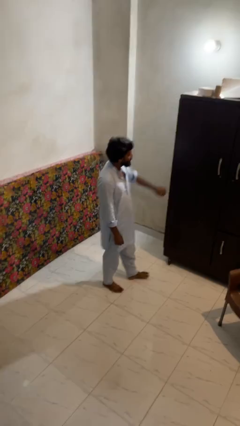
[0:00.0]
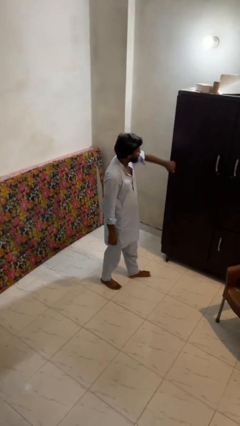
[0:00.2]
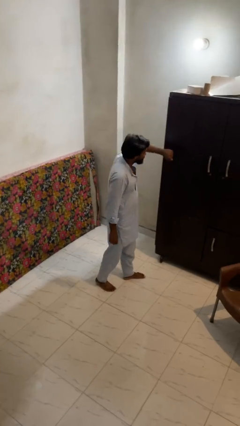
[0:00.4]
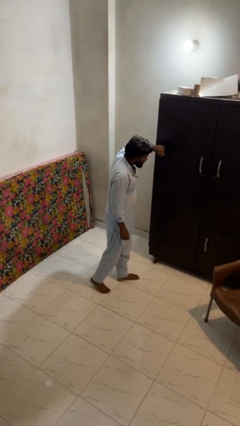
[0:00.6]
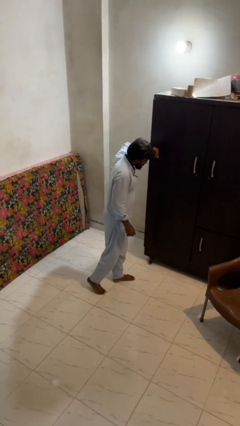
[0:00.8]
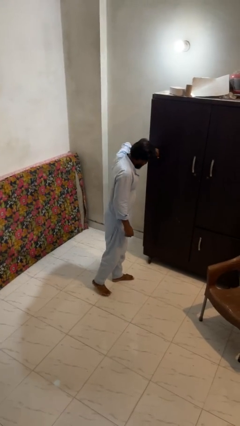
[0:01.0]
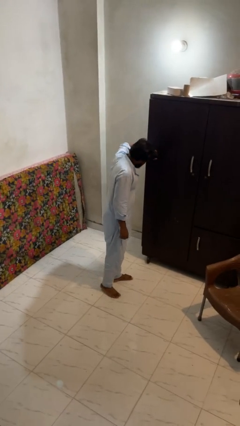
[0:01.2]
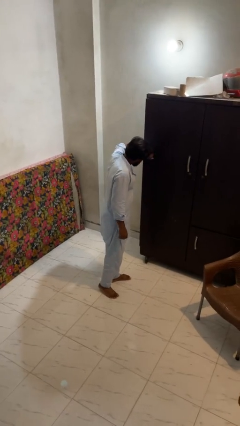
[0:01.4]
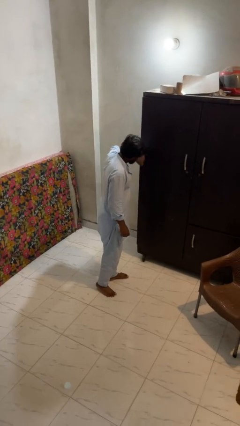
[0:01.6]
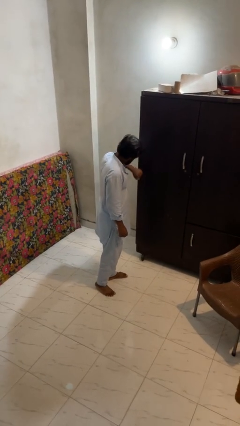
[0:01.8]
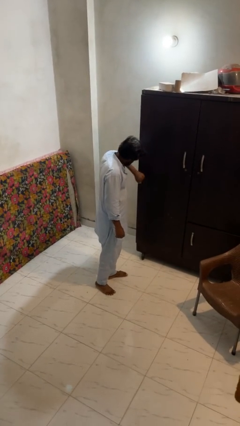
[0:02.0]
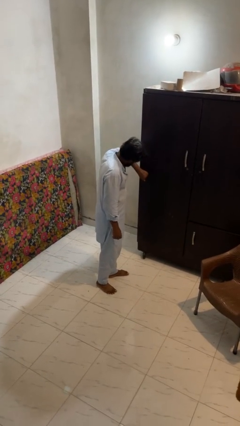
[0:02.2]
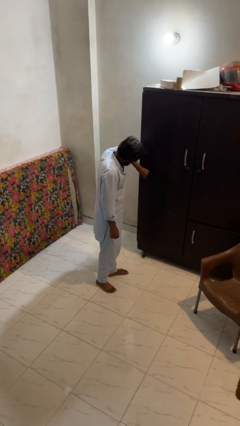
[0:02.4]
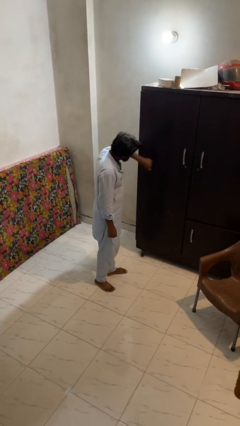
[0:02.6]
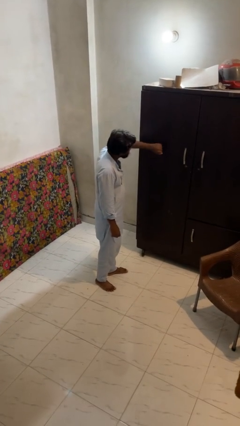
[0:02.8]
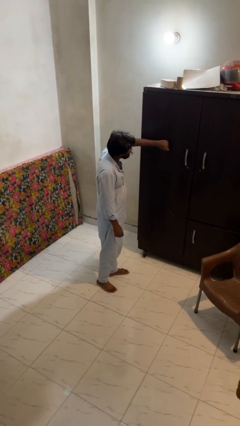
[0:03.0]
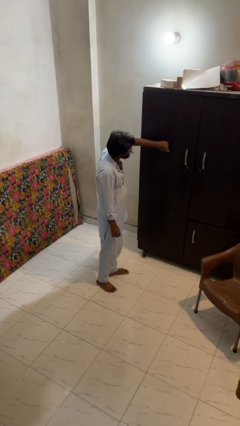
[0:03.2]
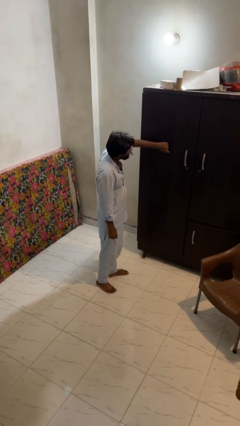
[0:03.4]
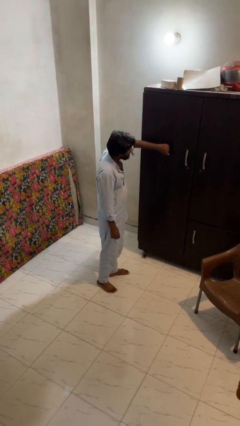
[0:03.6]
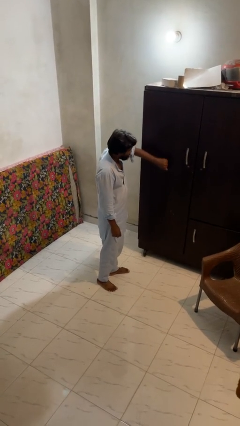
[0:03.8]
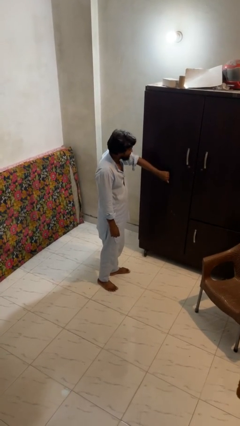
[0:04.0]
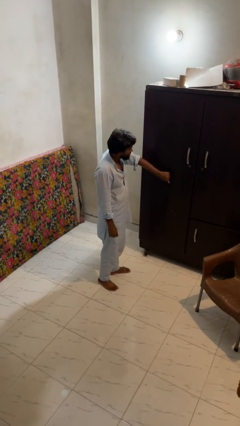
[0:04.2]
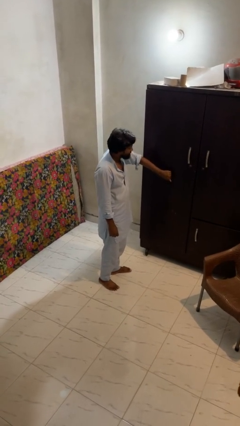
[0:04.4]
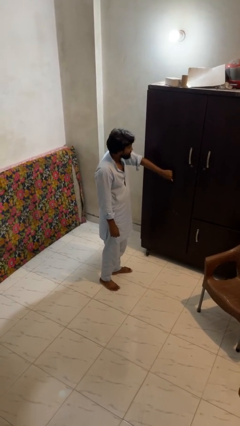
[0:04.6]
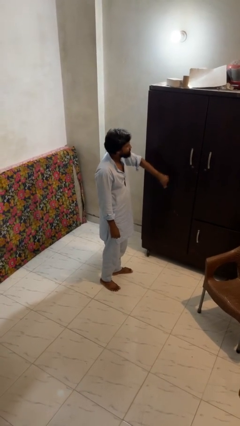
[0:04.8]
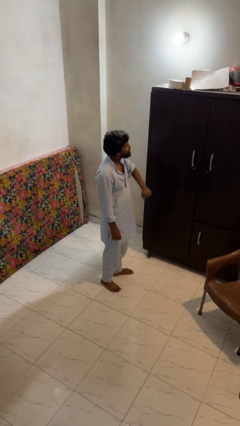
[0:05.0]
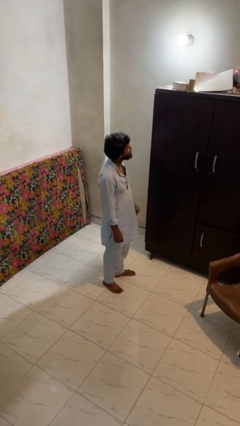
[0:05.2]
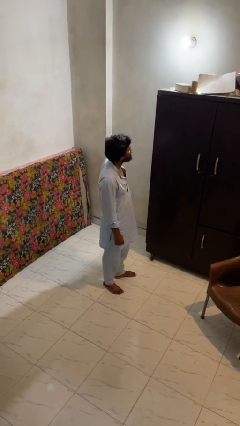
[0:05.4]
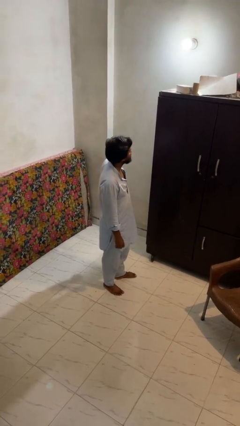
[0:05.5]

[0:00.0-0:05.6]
person taps object with finger

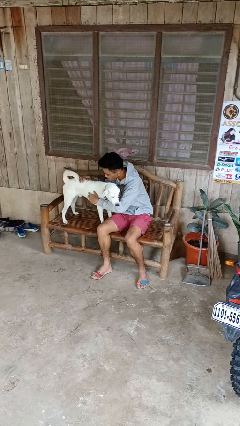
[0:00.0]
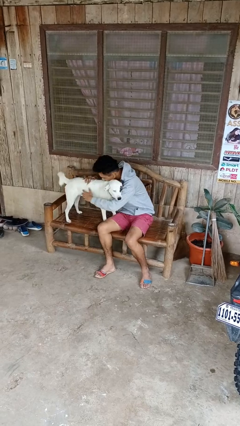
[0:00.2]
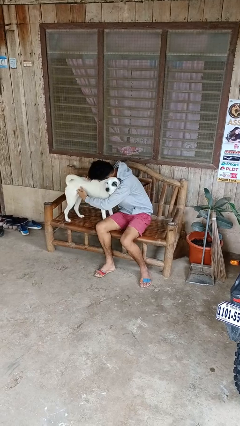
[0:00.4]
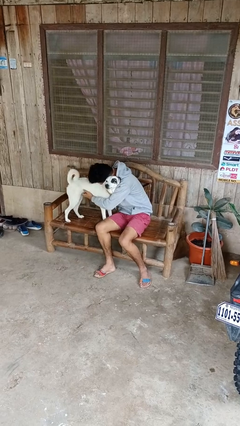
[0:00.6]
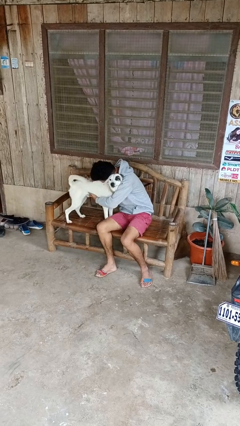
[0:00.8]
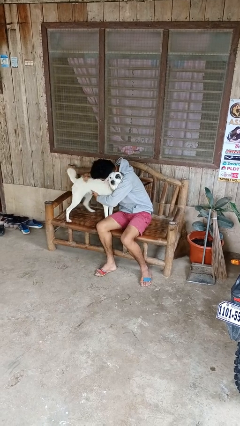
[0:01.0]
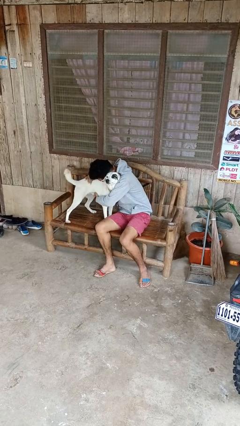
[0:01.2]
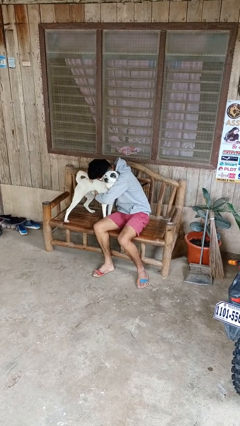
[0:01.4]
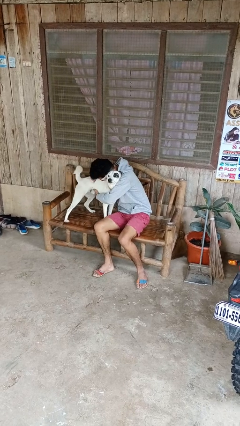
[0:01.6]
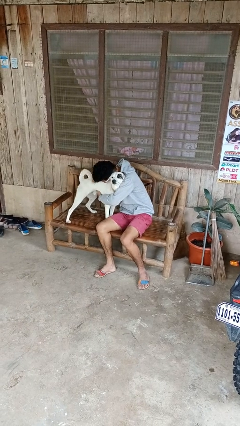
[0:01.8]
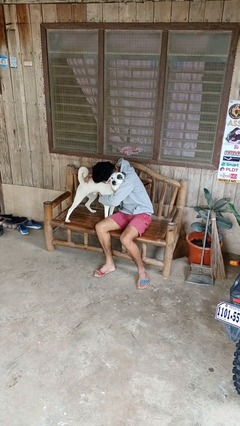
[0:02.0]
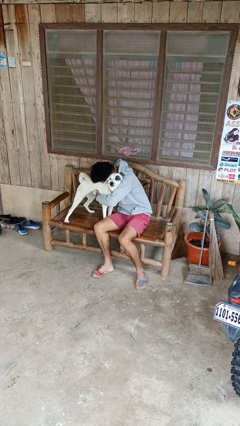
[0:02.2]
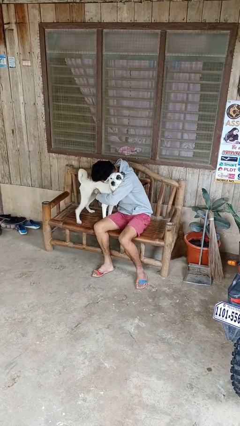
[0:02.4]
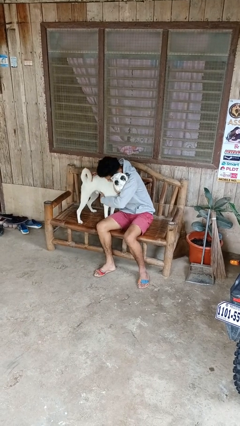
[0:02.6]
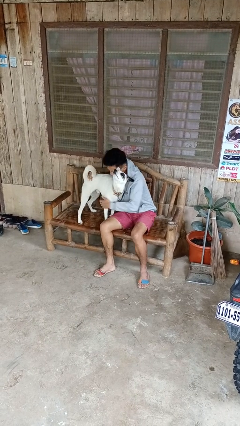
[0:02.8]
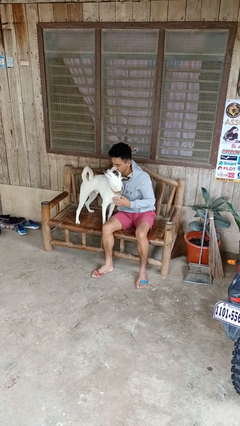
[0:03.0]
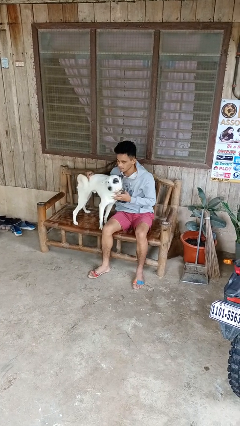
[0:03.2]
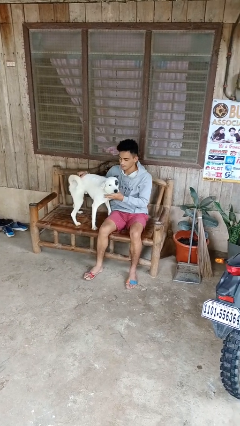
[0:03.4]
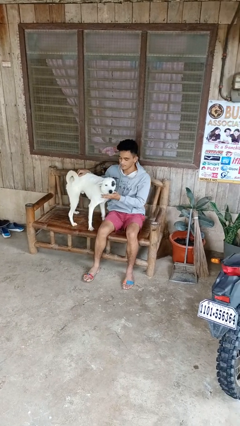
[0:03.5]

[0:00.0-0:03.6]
person hugs dog

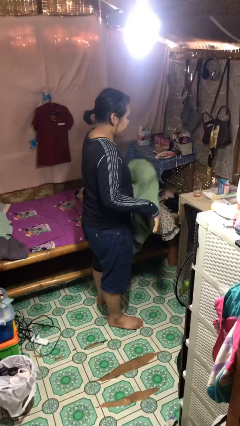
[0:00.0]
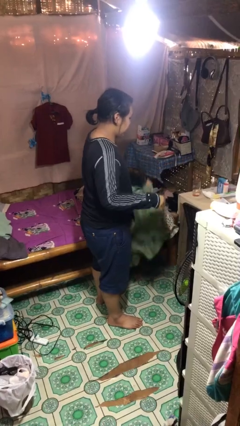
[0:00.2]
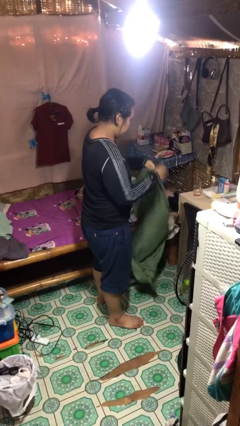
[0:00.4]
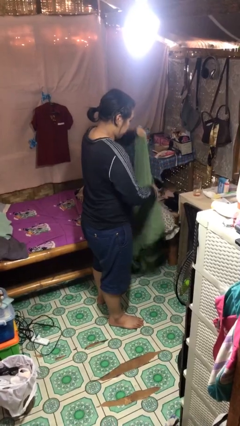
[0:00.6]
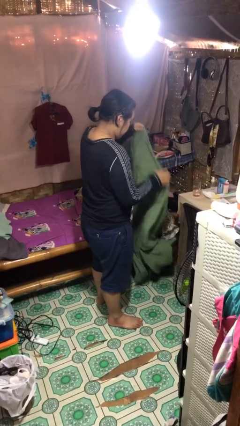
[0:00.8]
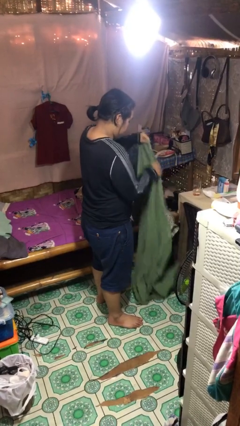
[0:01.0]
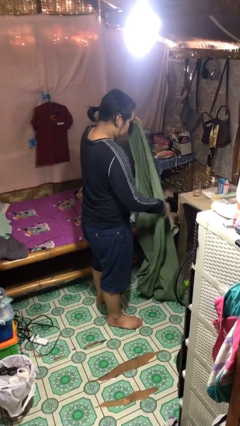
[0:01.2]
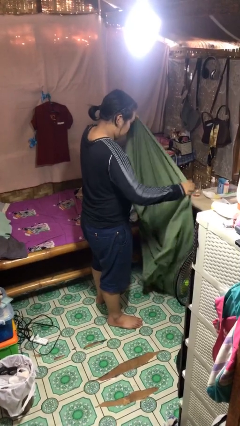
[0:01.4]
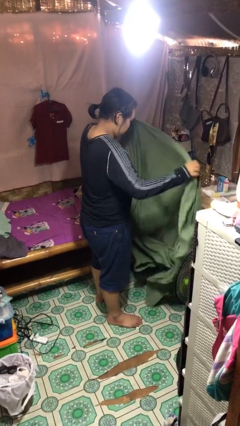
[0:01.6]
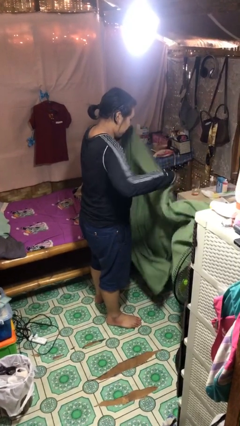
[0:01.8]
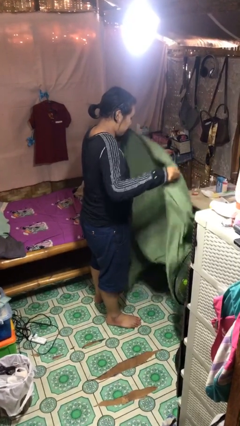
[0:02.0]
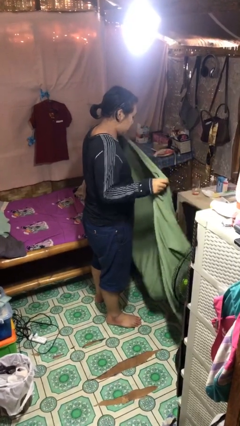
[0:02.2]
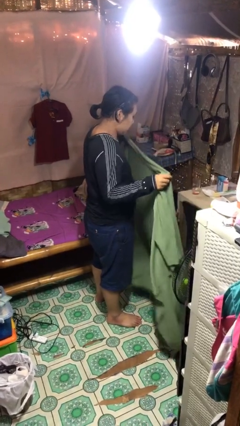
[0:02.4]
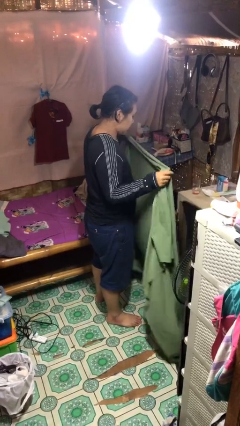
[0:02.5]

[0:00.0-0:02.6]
person unfolds blanket

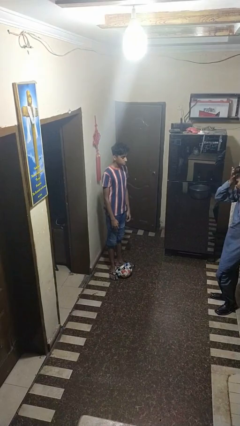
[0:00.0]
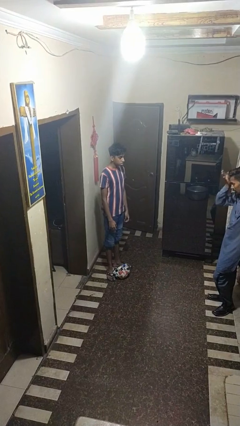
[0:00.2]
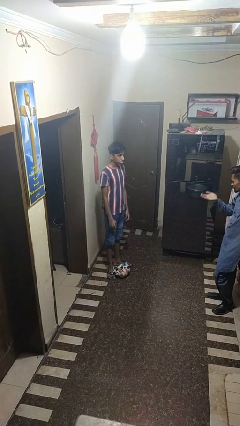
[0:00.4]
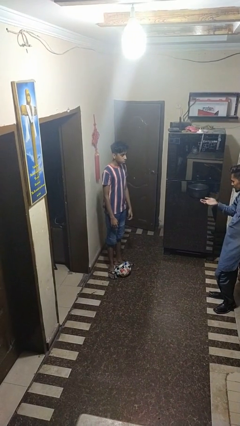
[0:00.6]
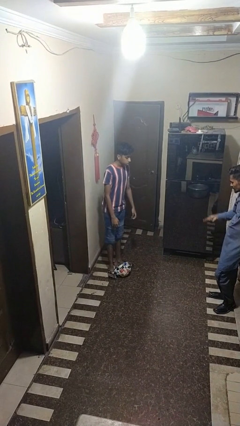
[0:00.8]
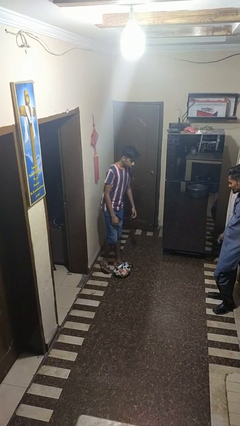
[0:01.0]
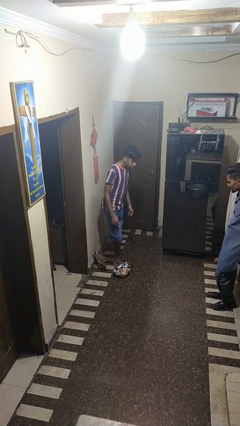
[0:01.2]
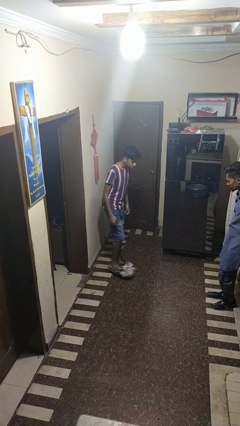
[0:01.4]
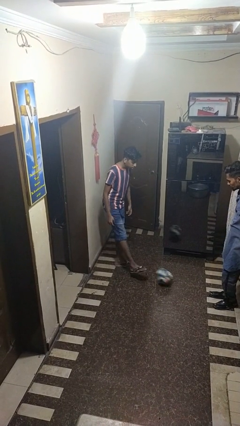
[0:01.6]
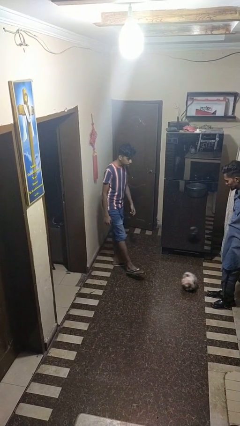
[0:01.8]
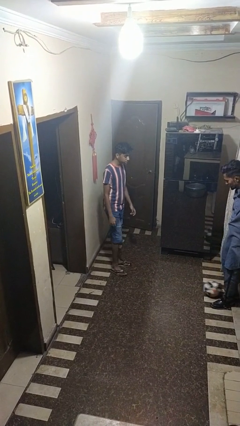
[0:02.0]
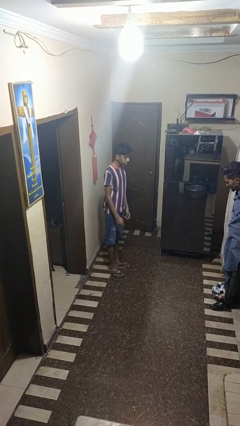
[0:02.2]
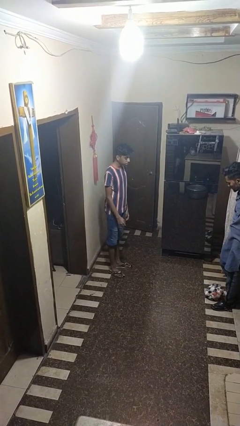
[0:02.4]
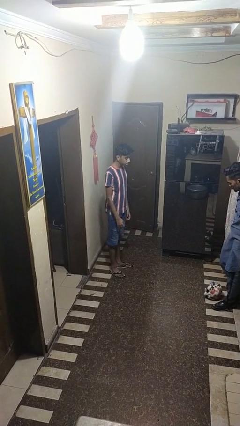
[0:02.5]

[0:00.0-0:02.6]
person kicks object to person

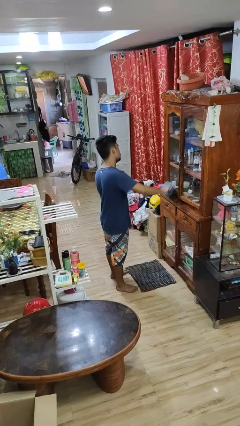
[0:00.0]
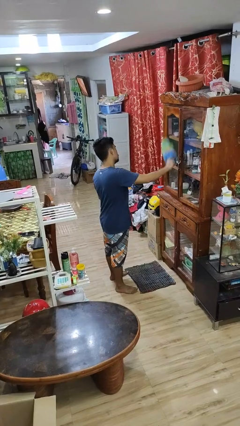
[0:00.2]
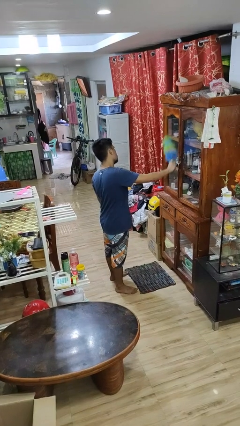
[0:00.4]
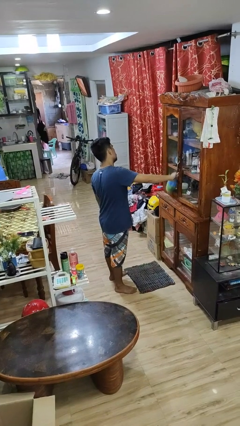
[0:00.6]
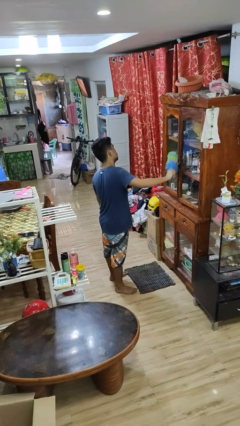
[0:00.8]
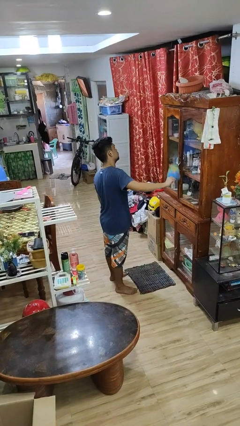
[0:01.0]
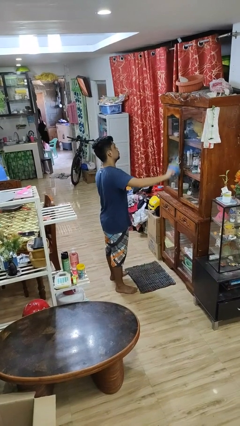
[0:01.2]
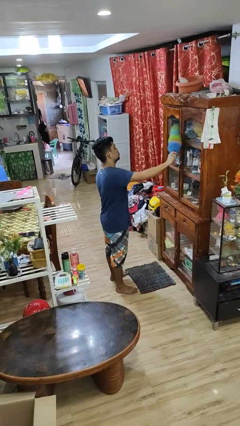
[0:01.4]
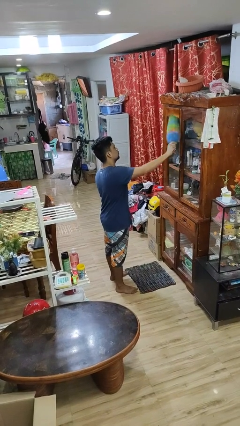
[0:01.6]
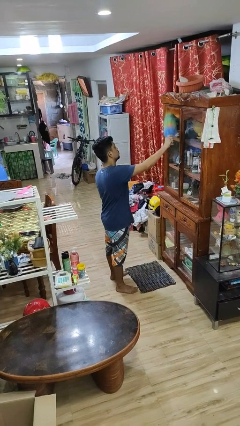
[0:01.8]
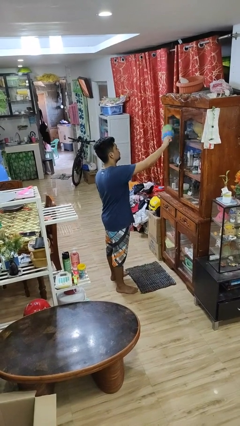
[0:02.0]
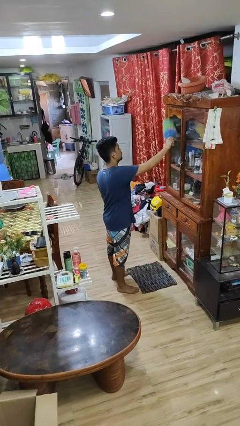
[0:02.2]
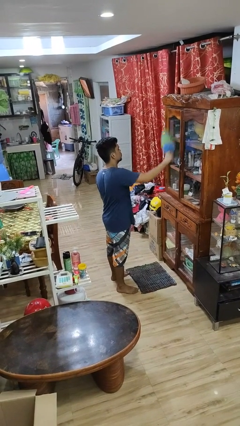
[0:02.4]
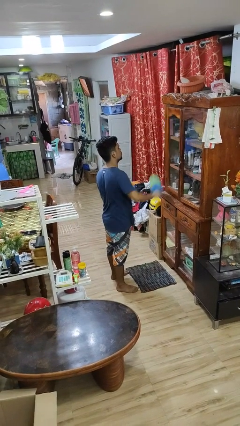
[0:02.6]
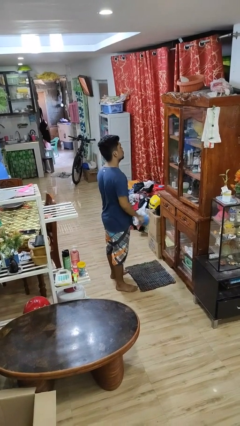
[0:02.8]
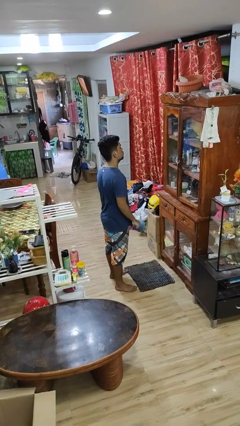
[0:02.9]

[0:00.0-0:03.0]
person dusts furniture
